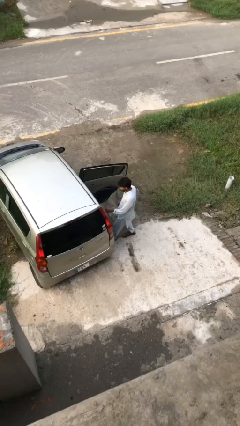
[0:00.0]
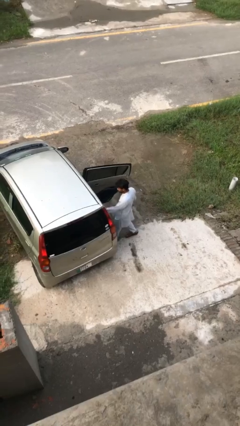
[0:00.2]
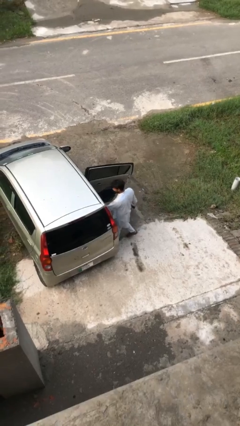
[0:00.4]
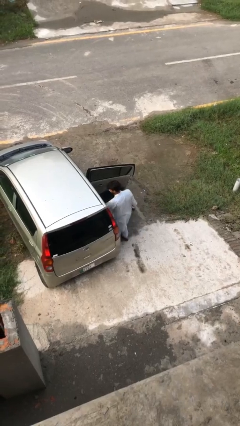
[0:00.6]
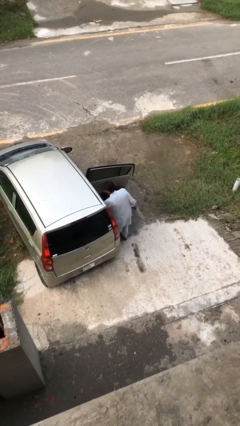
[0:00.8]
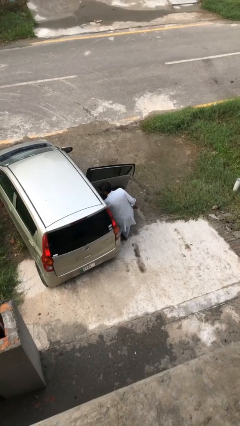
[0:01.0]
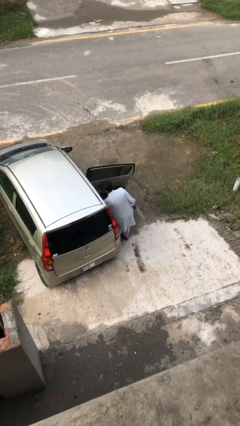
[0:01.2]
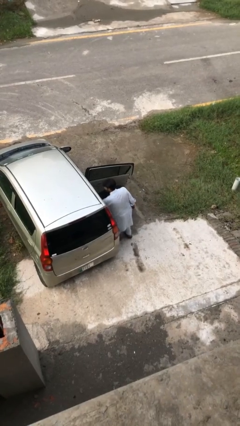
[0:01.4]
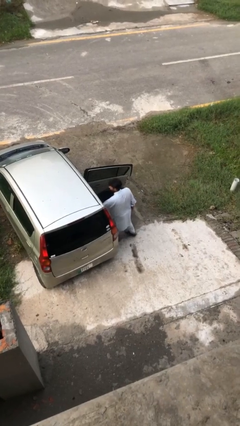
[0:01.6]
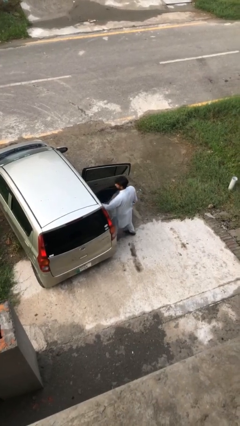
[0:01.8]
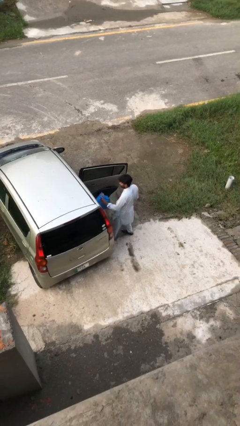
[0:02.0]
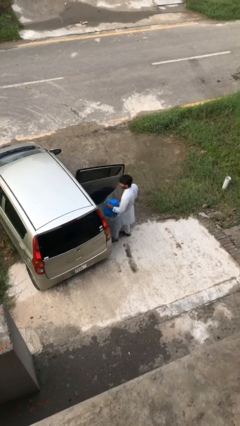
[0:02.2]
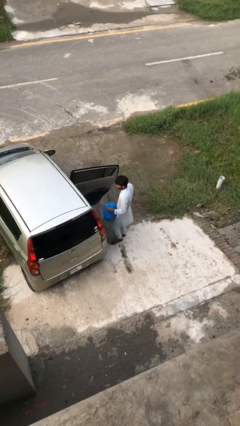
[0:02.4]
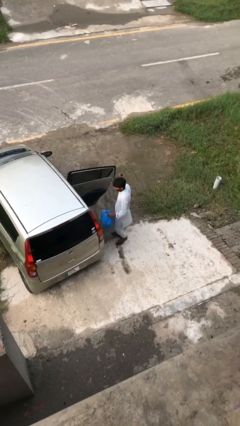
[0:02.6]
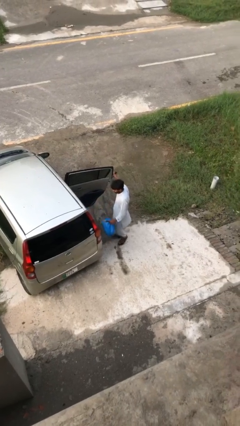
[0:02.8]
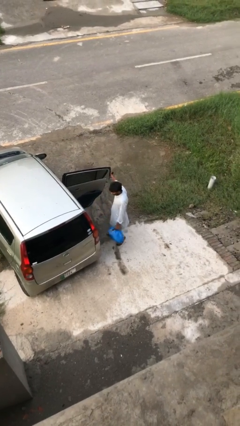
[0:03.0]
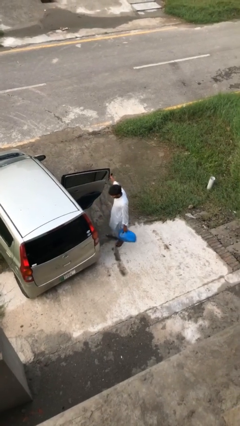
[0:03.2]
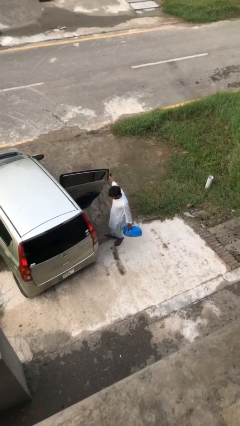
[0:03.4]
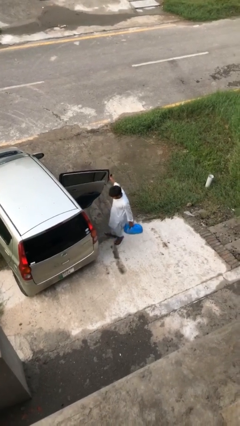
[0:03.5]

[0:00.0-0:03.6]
person unloads car

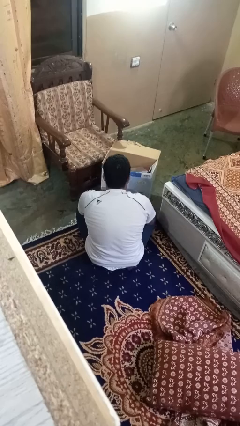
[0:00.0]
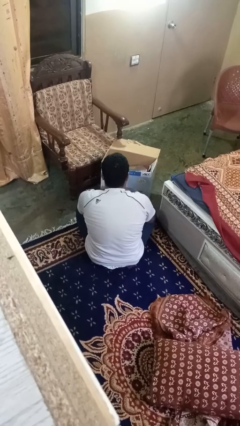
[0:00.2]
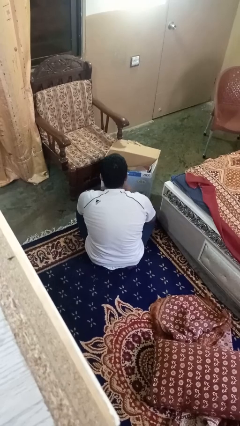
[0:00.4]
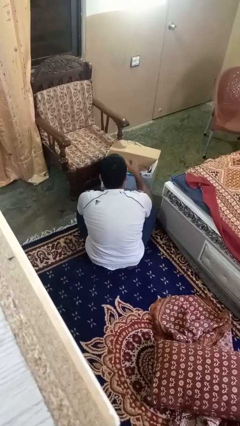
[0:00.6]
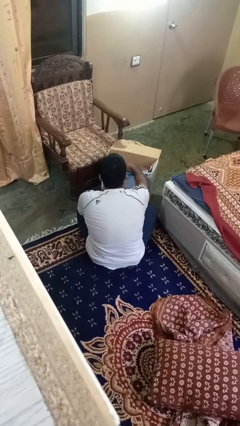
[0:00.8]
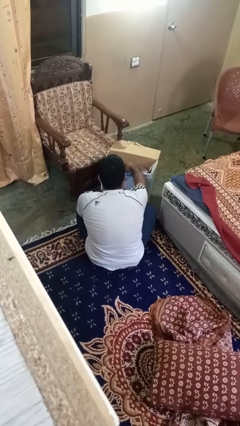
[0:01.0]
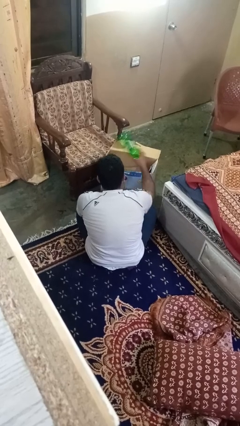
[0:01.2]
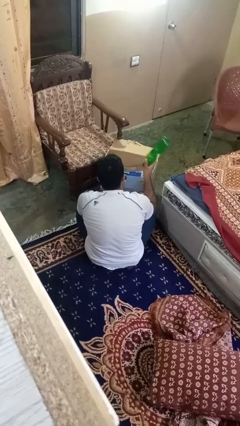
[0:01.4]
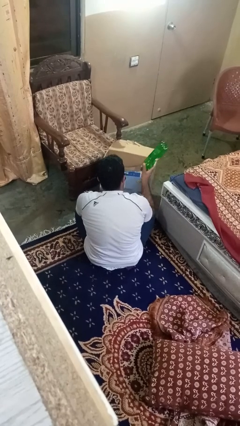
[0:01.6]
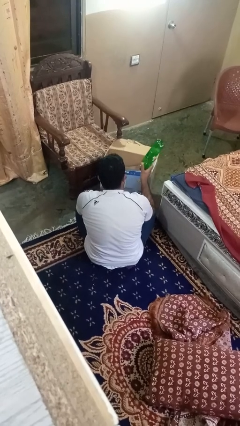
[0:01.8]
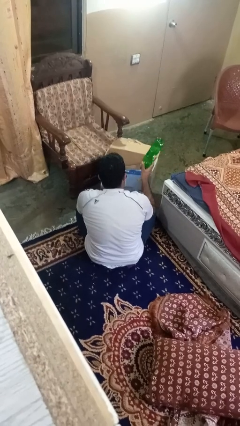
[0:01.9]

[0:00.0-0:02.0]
person takes object from box

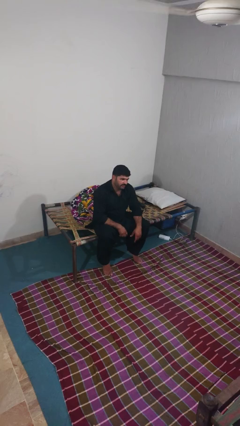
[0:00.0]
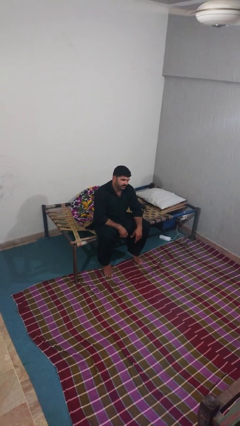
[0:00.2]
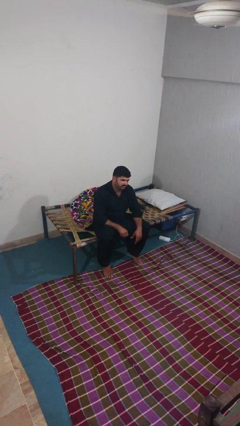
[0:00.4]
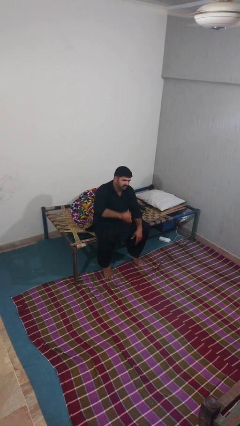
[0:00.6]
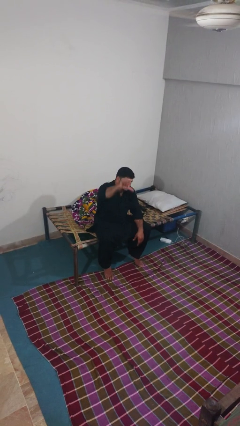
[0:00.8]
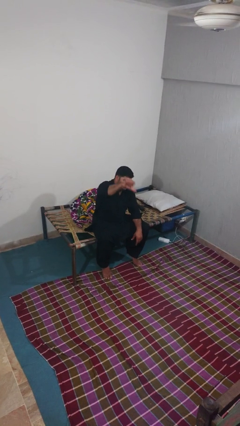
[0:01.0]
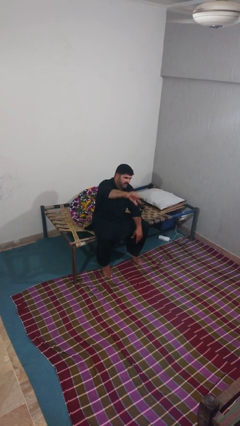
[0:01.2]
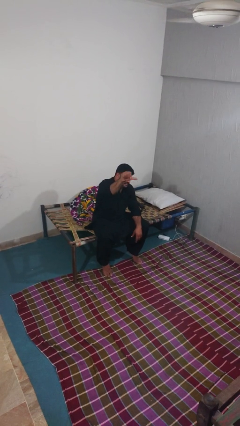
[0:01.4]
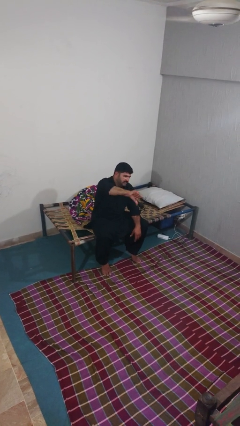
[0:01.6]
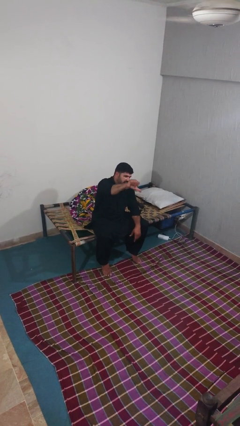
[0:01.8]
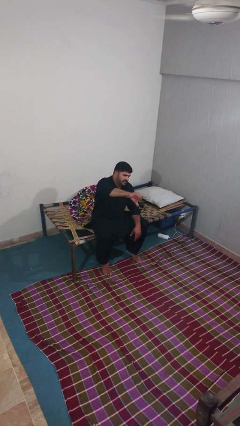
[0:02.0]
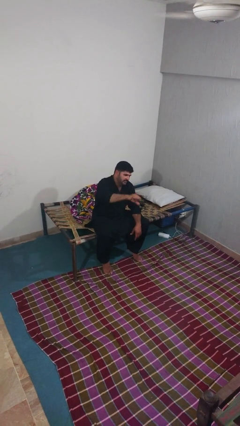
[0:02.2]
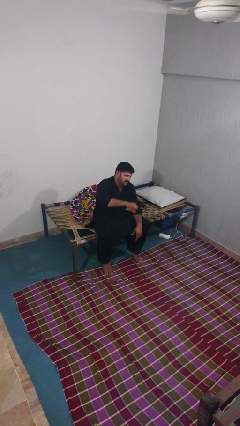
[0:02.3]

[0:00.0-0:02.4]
person gestures thumbs down

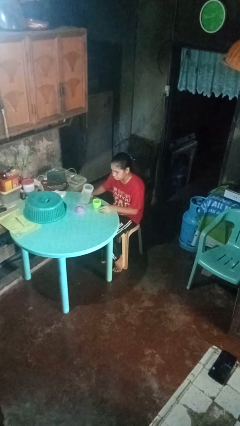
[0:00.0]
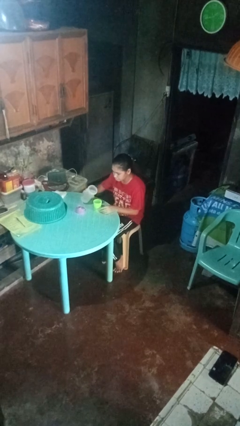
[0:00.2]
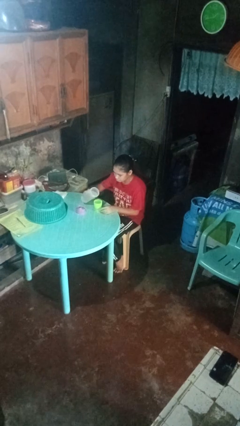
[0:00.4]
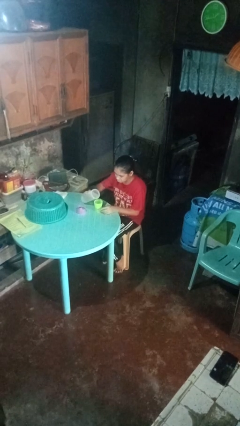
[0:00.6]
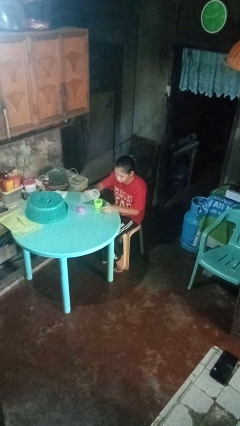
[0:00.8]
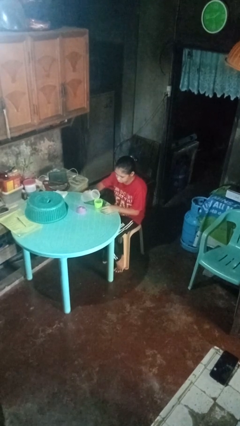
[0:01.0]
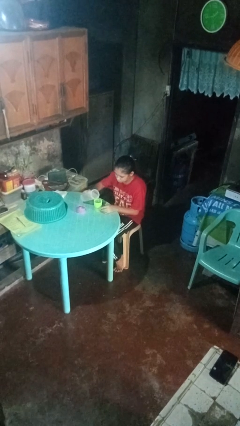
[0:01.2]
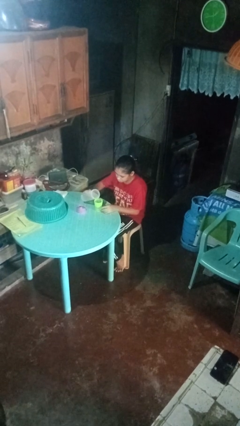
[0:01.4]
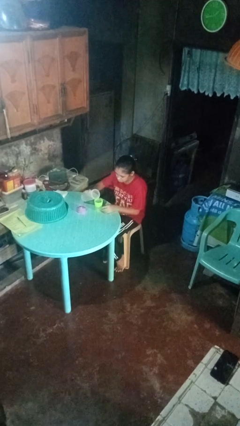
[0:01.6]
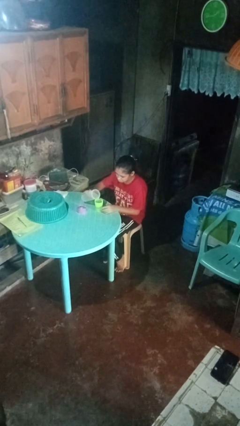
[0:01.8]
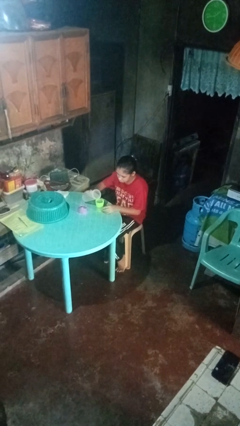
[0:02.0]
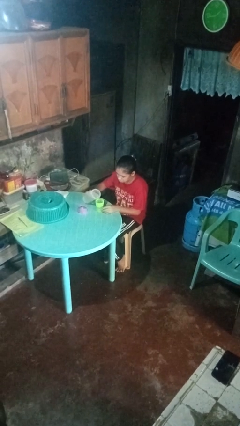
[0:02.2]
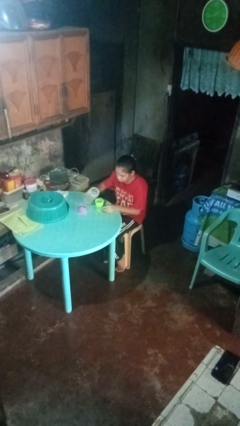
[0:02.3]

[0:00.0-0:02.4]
person pours liquid into cup

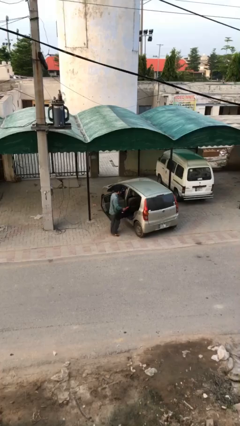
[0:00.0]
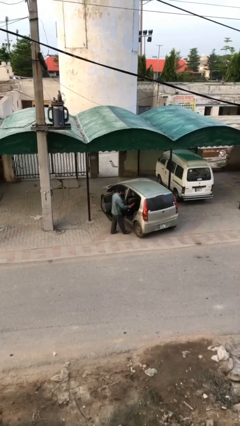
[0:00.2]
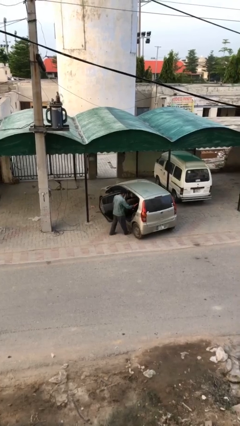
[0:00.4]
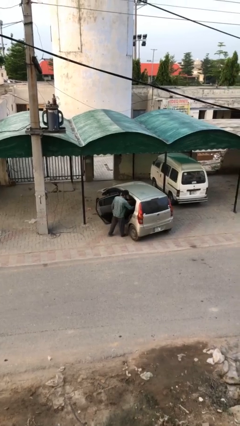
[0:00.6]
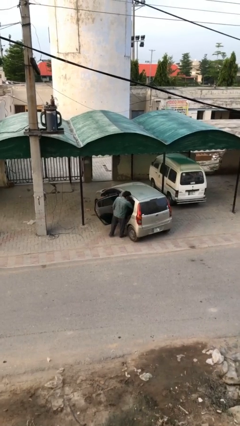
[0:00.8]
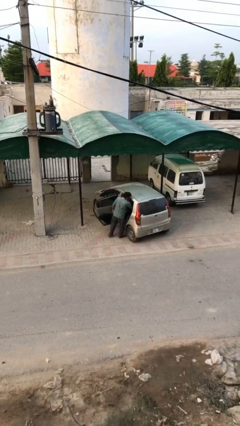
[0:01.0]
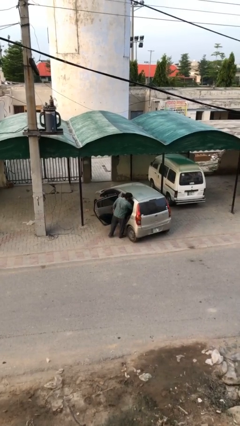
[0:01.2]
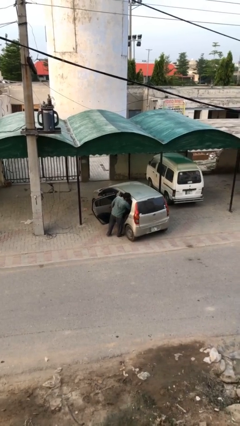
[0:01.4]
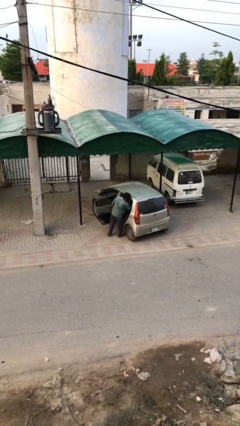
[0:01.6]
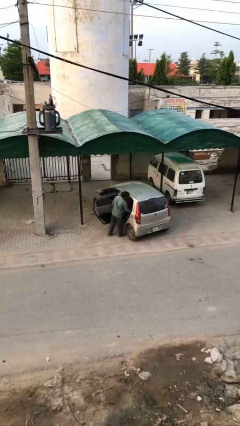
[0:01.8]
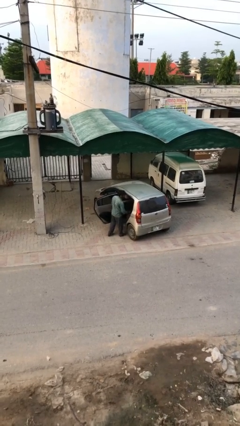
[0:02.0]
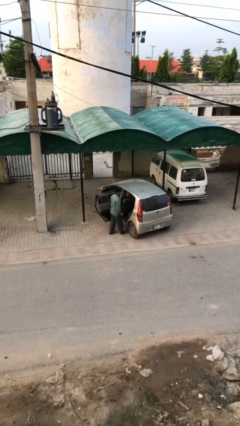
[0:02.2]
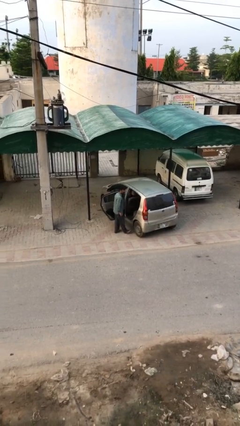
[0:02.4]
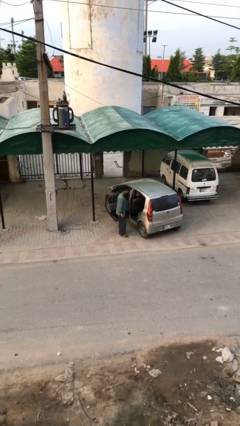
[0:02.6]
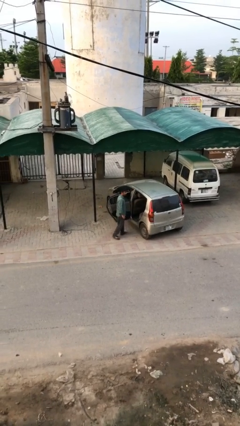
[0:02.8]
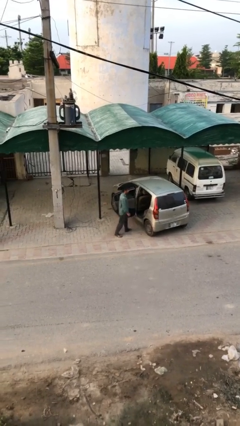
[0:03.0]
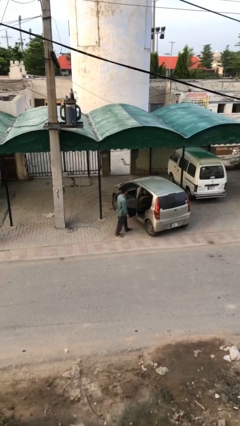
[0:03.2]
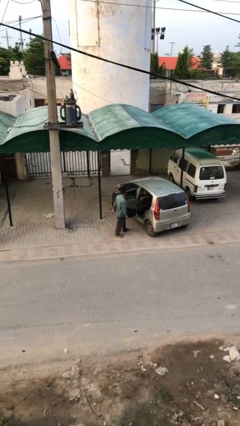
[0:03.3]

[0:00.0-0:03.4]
person loads car

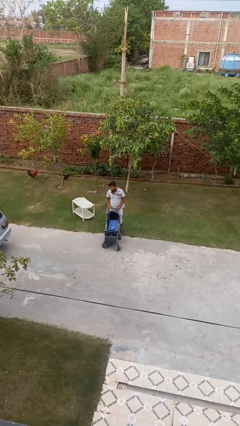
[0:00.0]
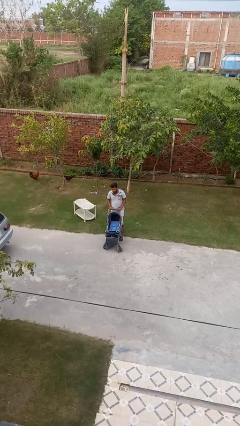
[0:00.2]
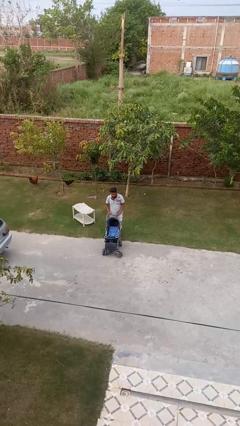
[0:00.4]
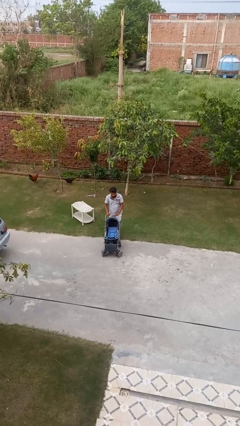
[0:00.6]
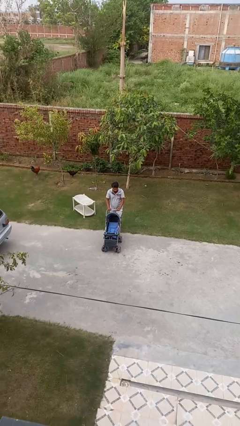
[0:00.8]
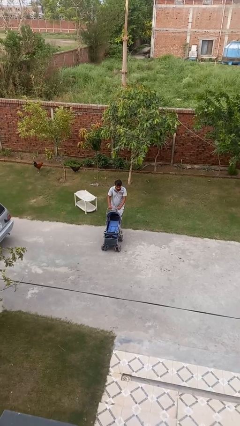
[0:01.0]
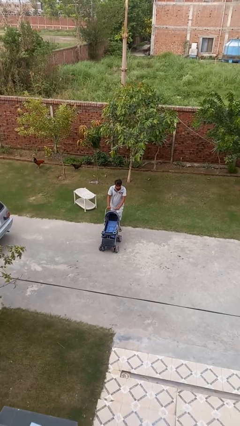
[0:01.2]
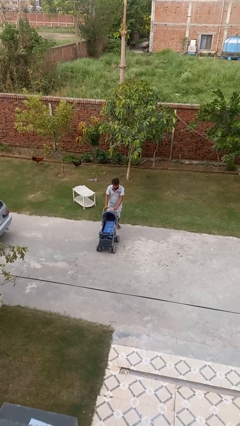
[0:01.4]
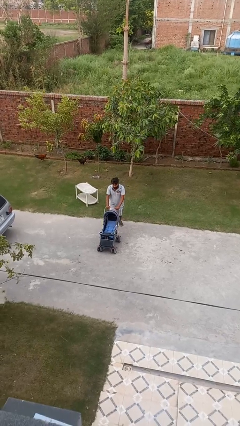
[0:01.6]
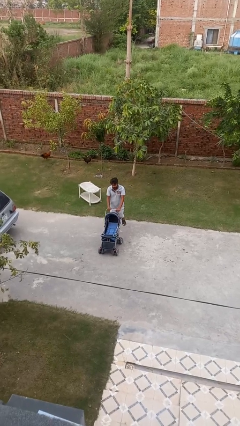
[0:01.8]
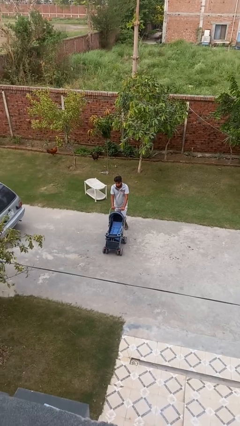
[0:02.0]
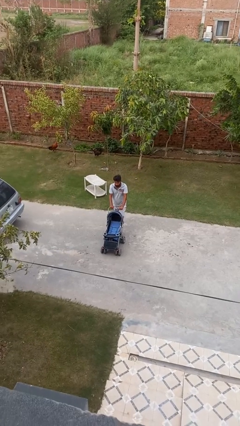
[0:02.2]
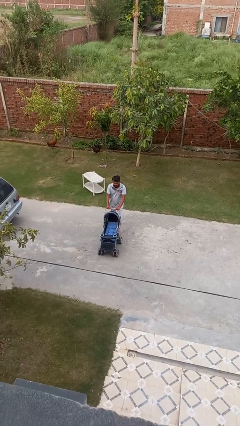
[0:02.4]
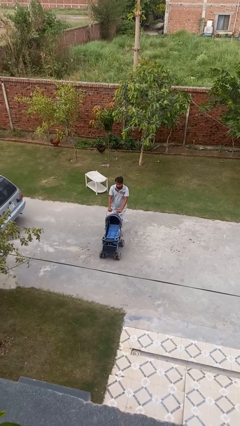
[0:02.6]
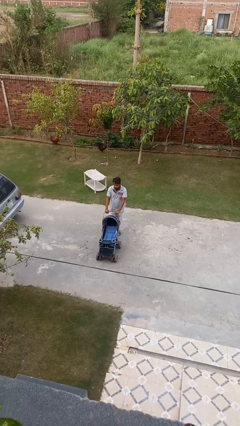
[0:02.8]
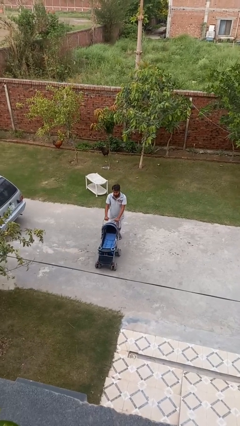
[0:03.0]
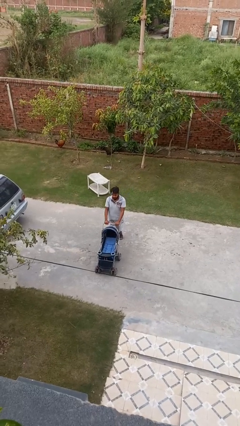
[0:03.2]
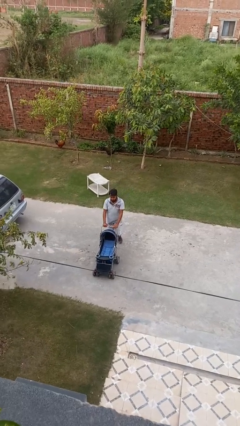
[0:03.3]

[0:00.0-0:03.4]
person pushes wheeled cart

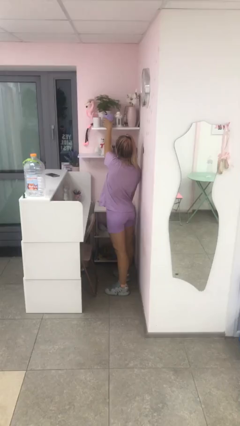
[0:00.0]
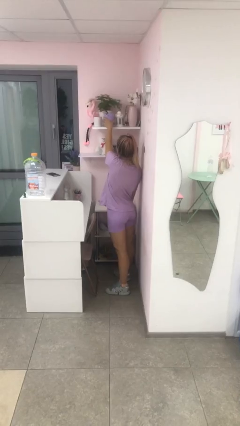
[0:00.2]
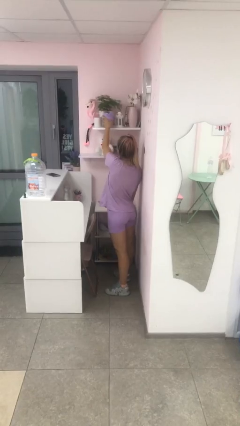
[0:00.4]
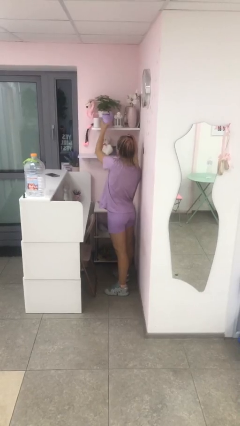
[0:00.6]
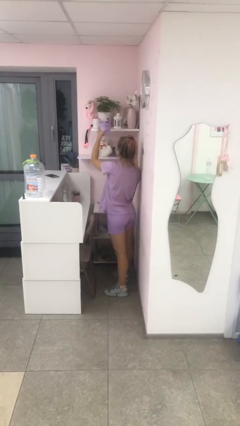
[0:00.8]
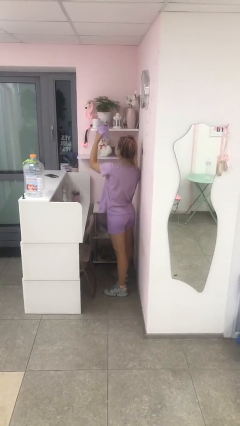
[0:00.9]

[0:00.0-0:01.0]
person picks up object from cabinet
